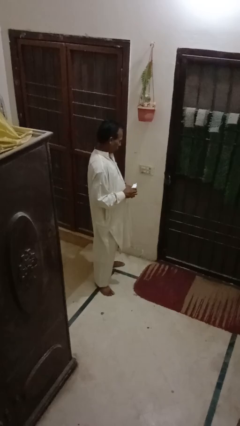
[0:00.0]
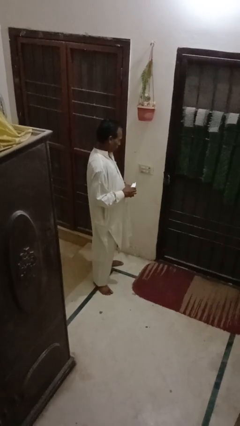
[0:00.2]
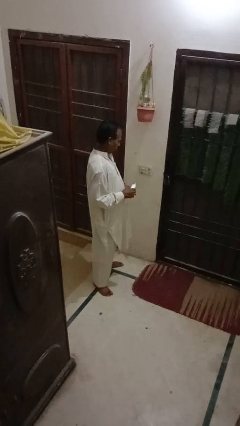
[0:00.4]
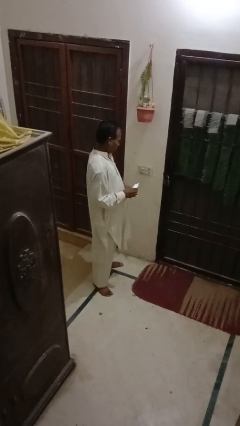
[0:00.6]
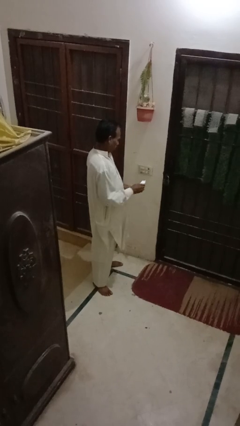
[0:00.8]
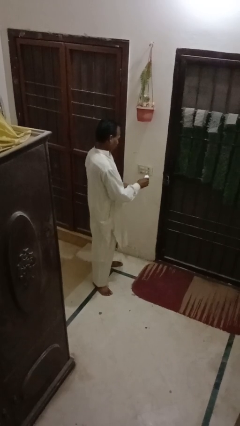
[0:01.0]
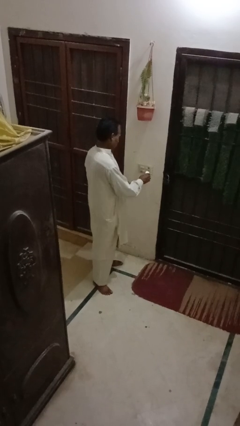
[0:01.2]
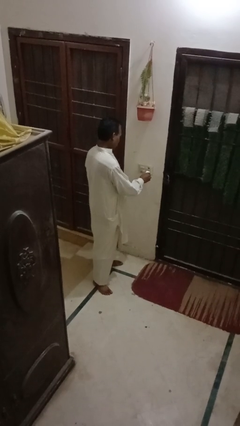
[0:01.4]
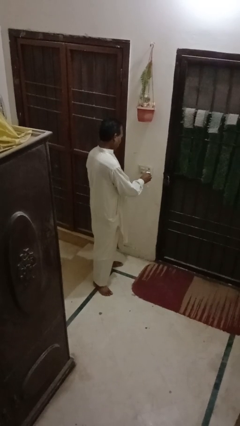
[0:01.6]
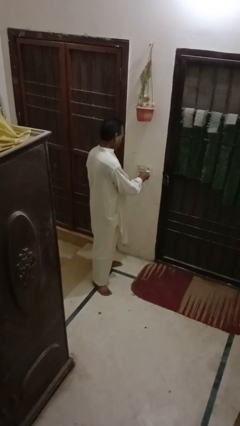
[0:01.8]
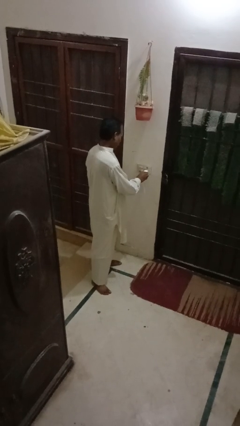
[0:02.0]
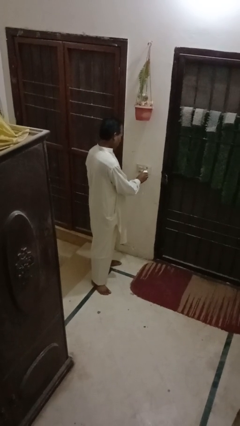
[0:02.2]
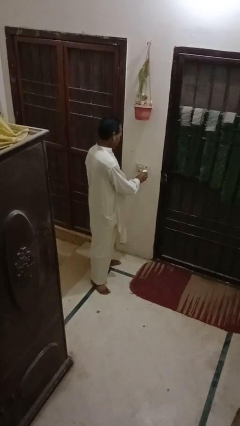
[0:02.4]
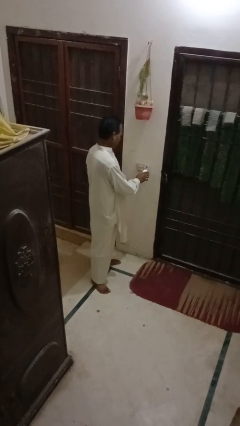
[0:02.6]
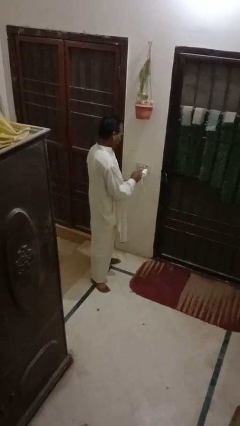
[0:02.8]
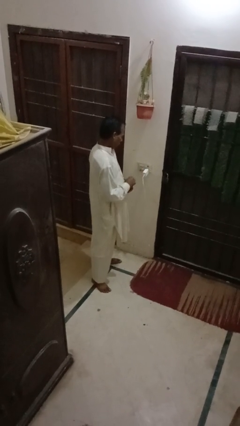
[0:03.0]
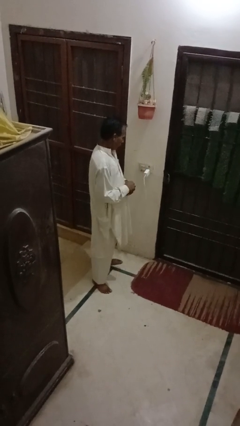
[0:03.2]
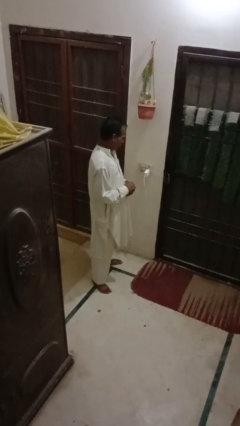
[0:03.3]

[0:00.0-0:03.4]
person plugs into electrical socket

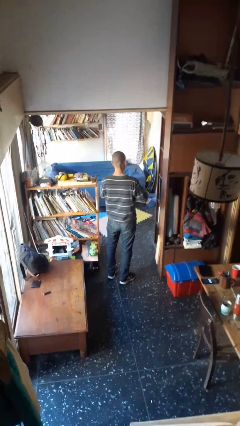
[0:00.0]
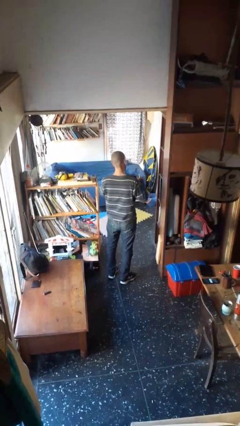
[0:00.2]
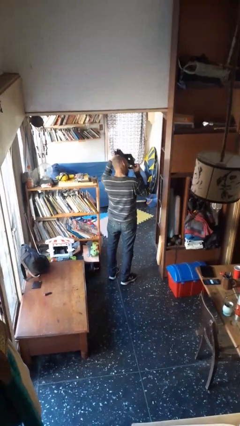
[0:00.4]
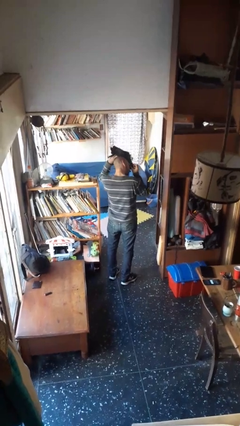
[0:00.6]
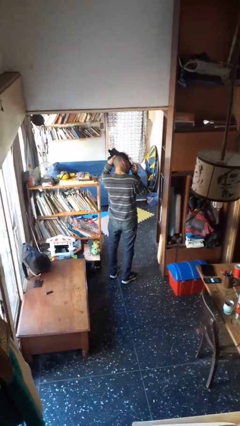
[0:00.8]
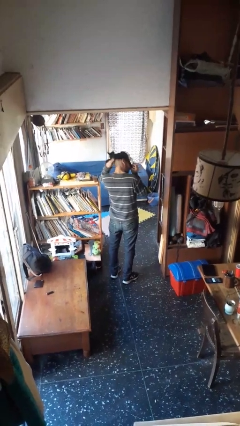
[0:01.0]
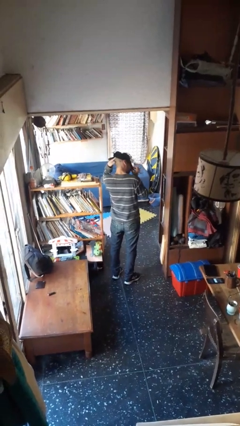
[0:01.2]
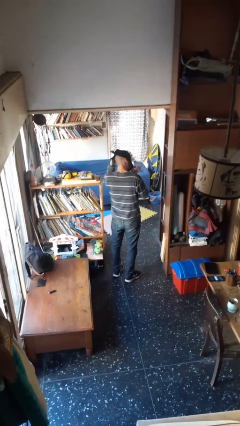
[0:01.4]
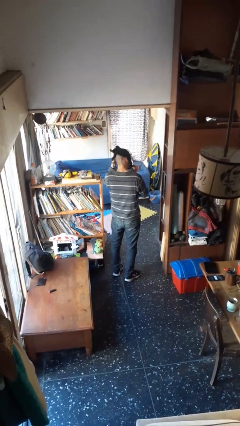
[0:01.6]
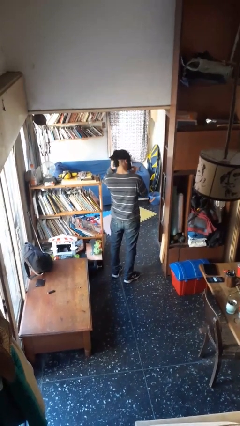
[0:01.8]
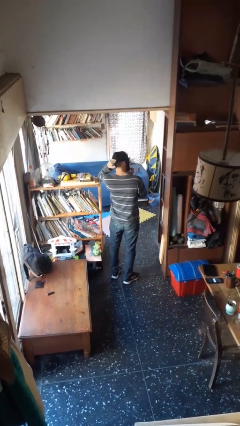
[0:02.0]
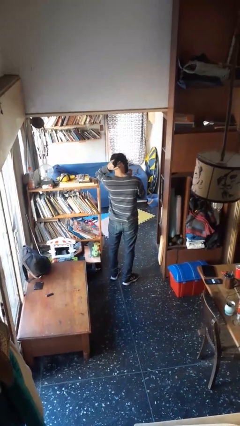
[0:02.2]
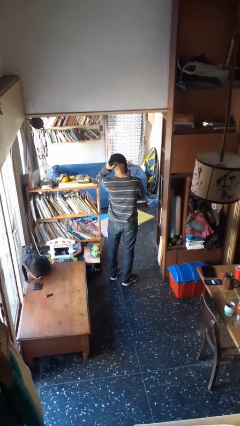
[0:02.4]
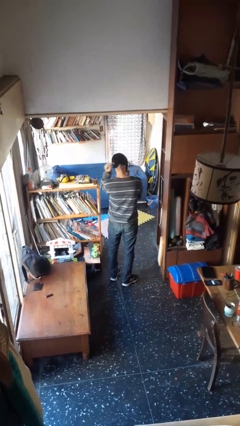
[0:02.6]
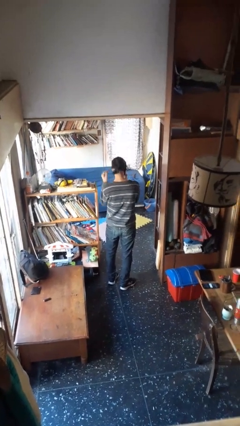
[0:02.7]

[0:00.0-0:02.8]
person puts on facemask

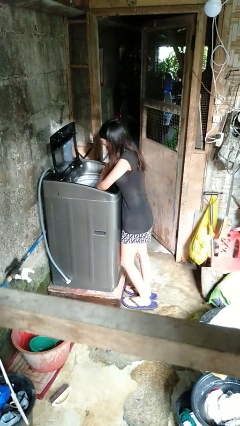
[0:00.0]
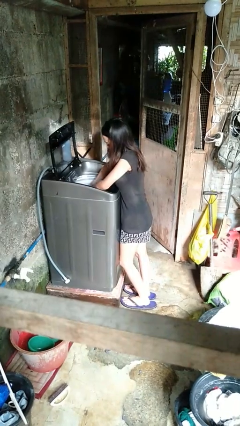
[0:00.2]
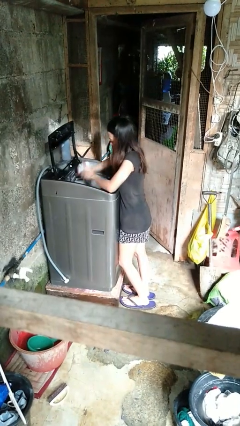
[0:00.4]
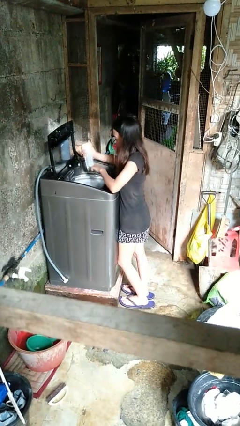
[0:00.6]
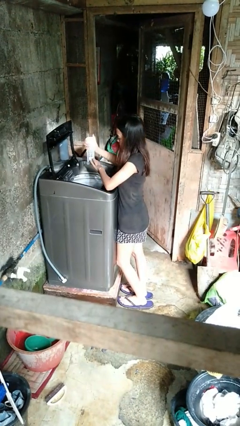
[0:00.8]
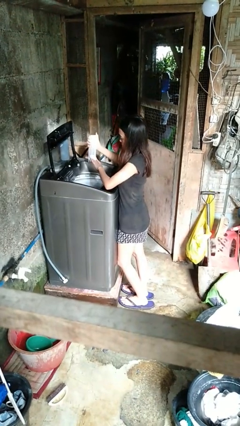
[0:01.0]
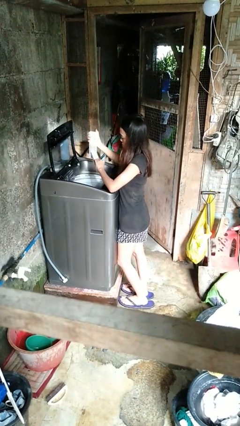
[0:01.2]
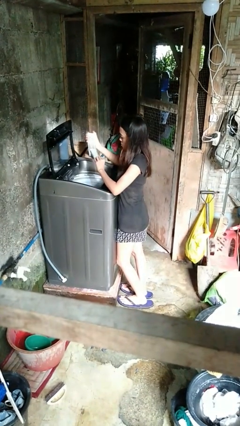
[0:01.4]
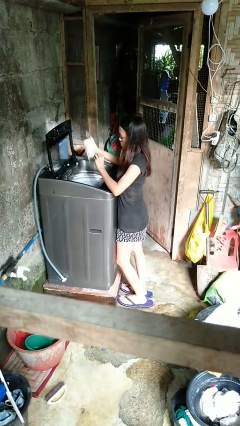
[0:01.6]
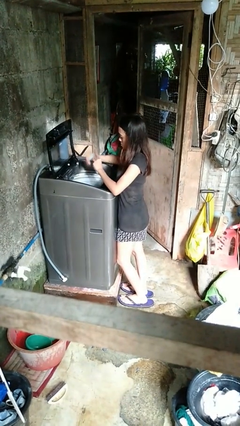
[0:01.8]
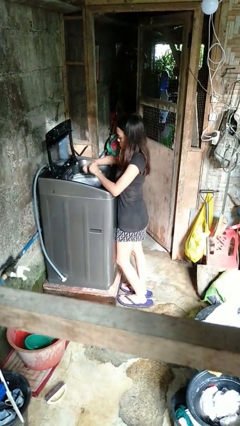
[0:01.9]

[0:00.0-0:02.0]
person cleans dryer lint trap

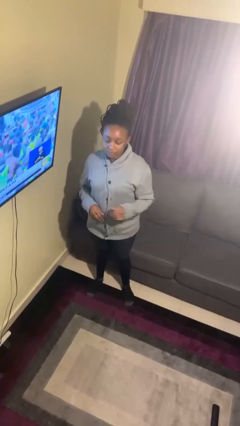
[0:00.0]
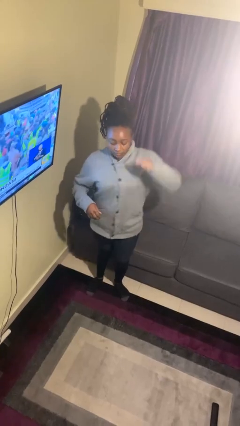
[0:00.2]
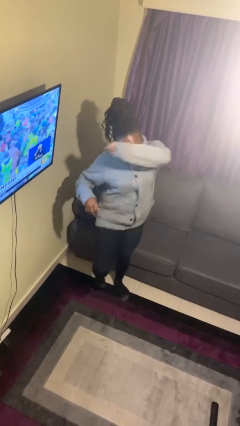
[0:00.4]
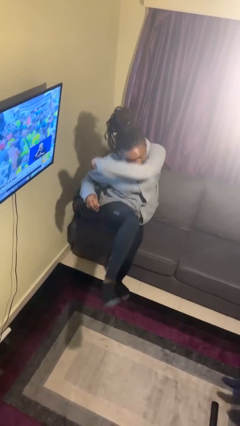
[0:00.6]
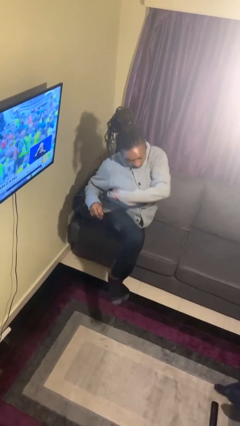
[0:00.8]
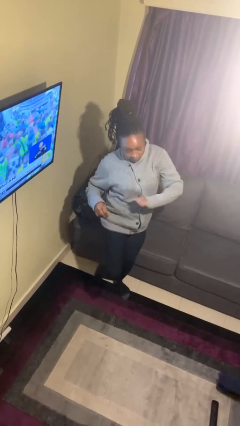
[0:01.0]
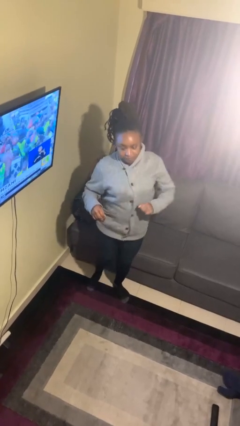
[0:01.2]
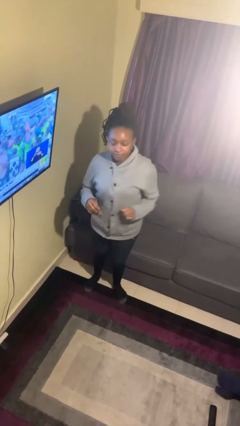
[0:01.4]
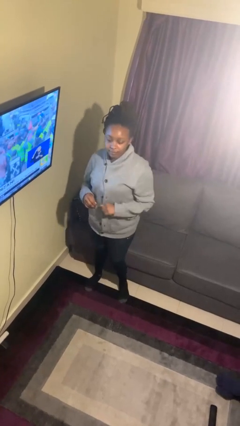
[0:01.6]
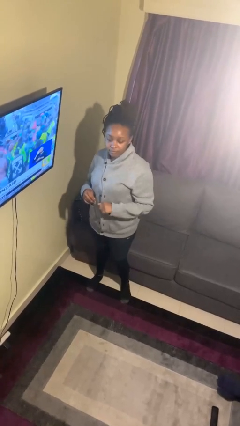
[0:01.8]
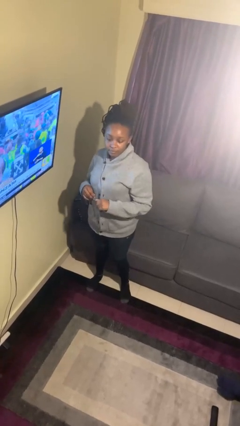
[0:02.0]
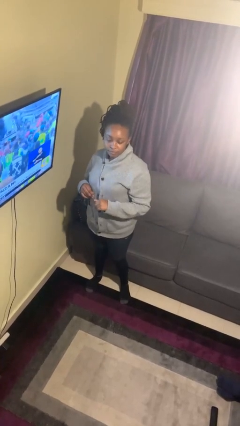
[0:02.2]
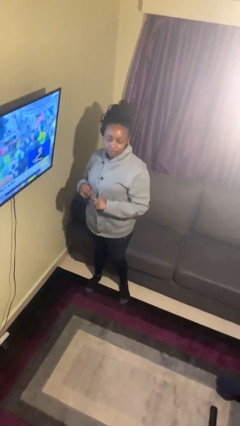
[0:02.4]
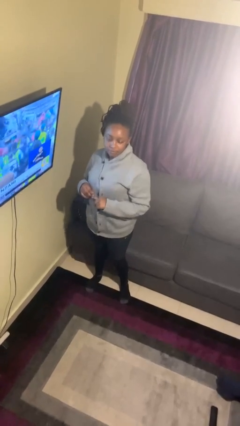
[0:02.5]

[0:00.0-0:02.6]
person karate kicks

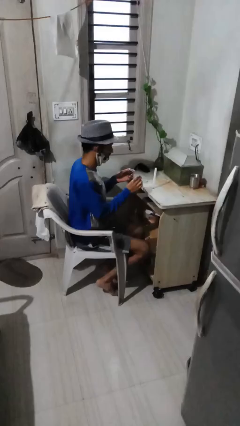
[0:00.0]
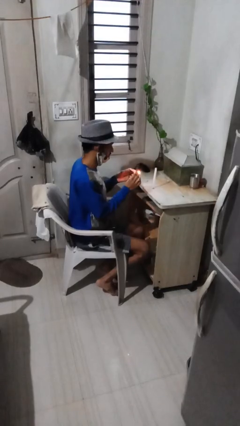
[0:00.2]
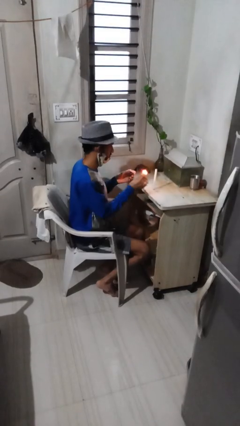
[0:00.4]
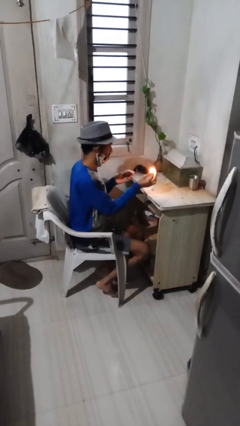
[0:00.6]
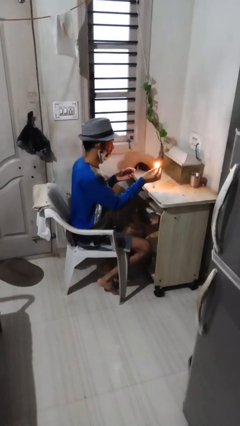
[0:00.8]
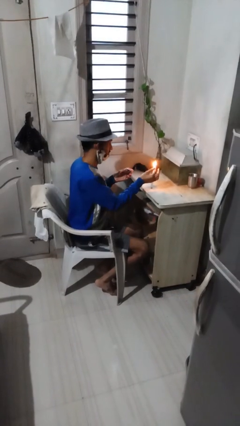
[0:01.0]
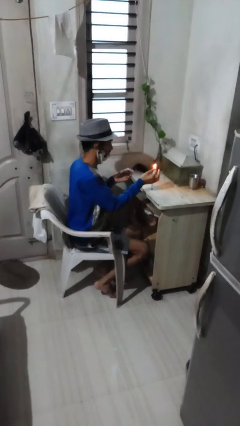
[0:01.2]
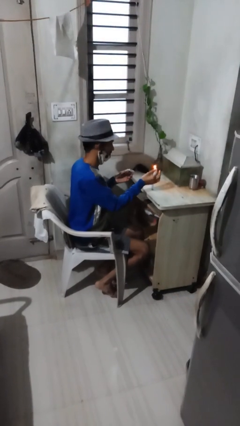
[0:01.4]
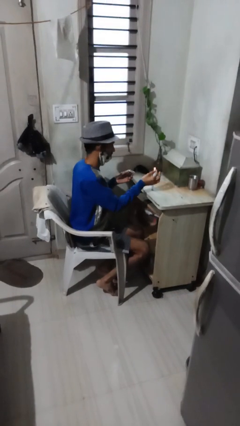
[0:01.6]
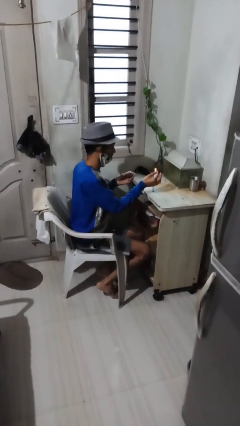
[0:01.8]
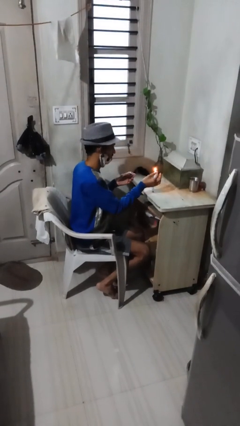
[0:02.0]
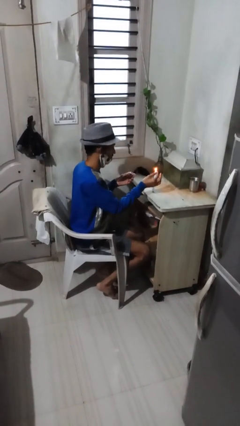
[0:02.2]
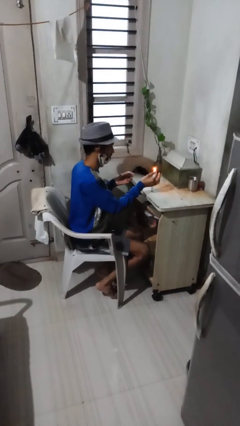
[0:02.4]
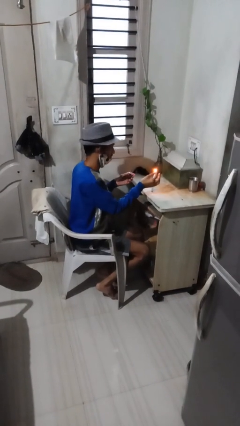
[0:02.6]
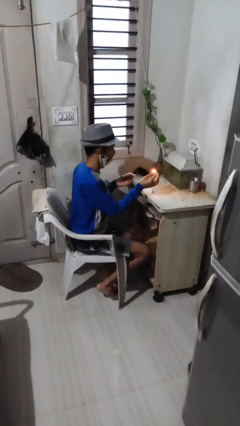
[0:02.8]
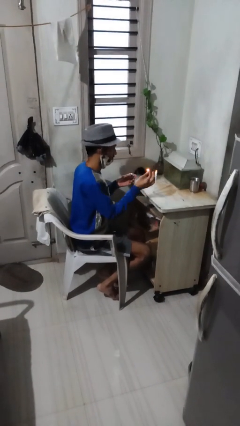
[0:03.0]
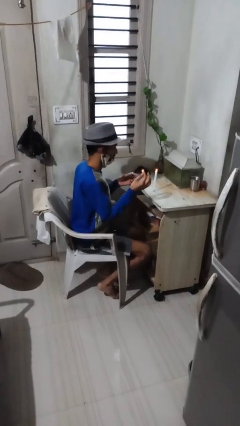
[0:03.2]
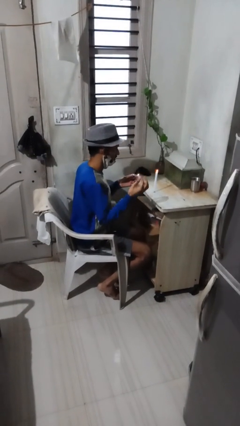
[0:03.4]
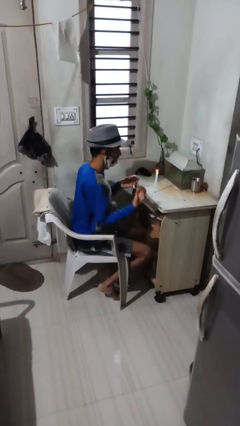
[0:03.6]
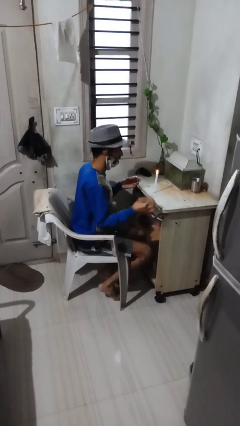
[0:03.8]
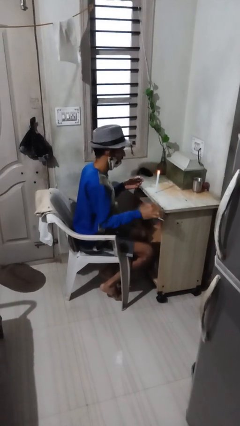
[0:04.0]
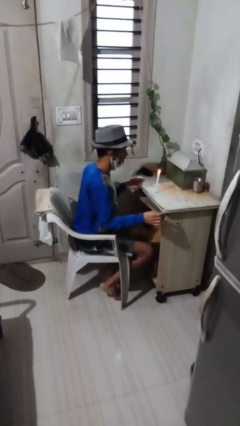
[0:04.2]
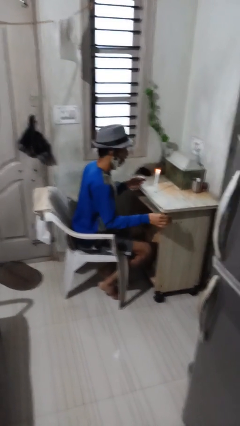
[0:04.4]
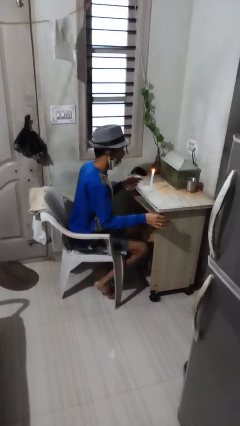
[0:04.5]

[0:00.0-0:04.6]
person lights candle

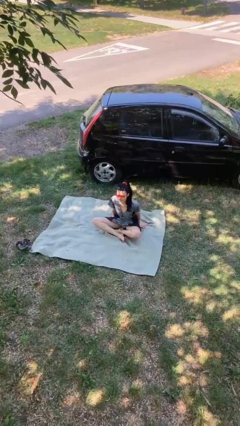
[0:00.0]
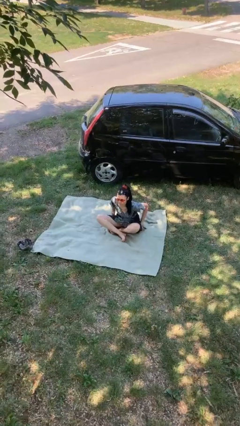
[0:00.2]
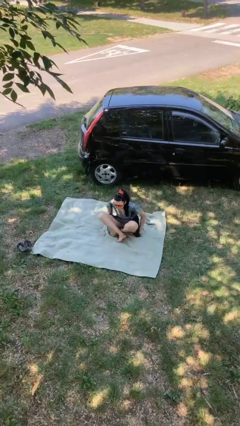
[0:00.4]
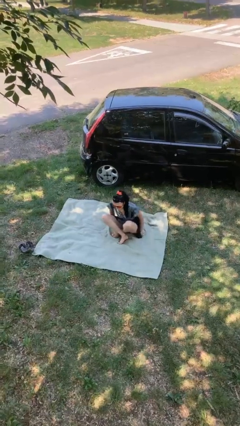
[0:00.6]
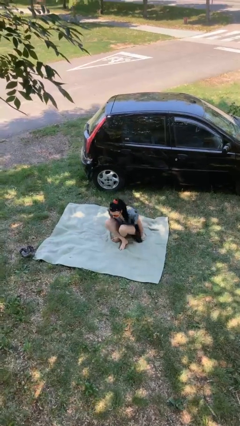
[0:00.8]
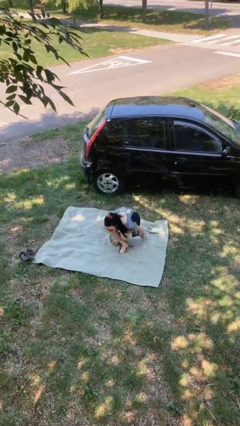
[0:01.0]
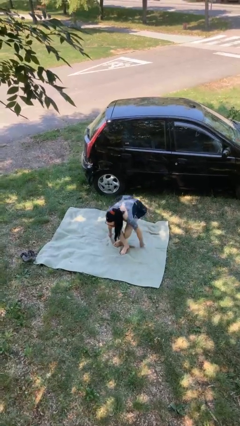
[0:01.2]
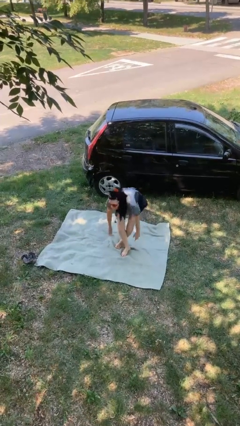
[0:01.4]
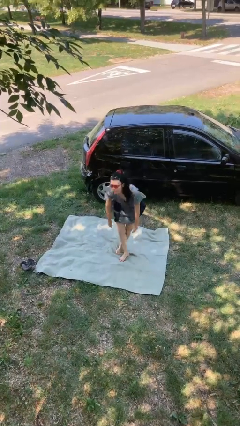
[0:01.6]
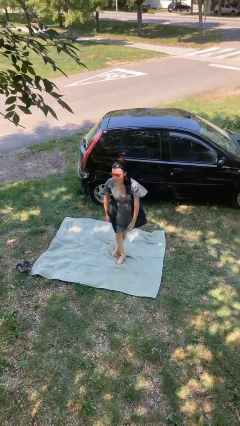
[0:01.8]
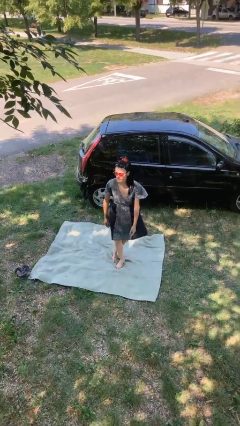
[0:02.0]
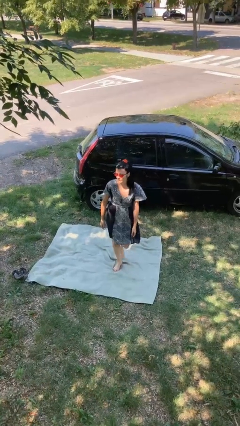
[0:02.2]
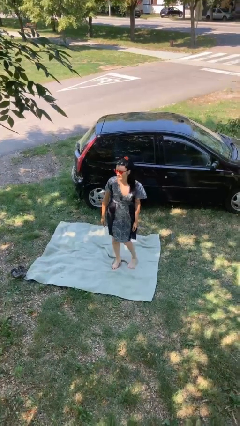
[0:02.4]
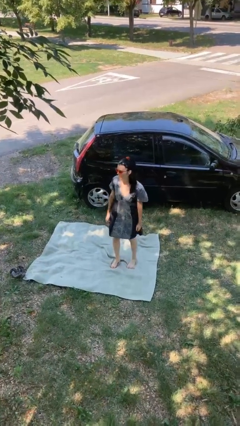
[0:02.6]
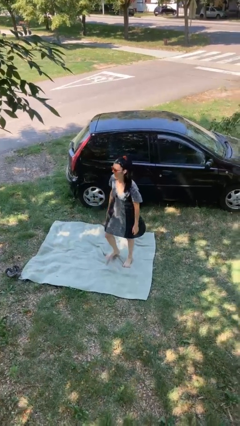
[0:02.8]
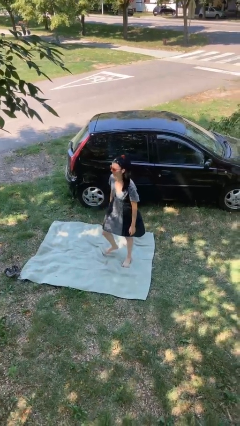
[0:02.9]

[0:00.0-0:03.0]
person stands up from floor
